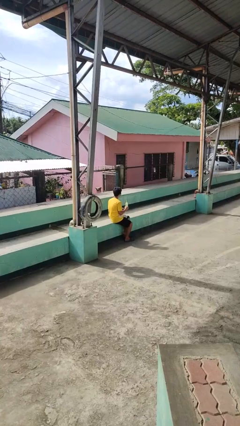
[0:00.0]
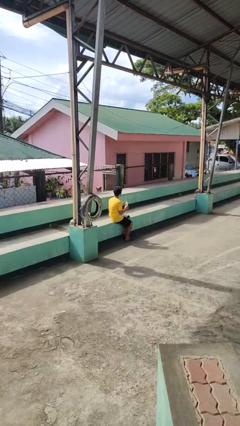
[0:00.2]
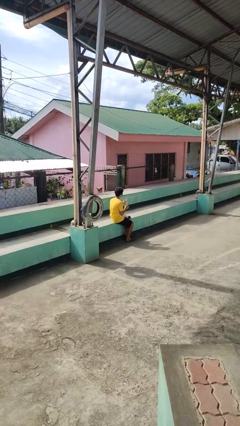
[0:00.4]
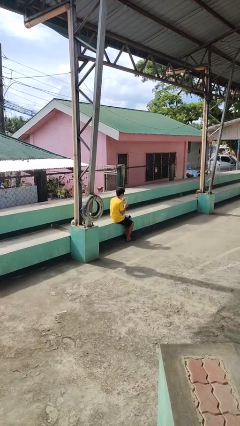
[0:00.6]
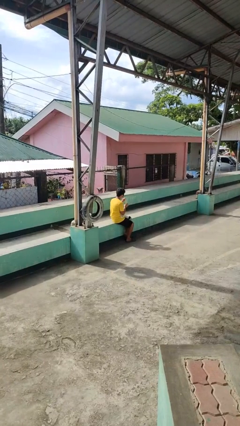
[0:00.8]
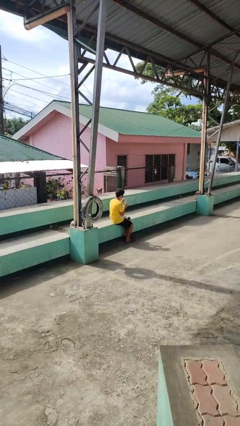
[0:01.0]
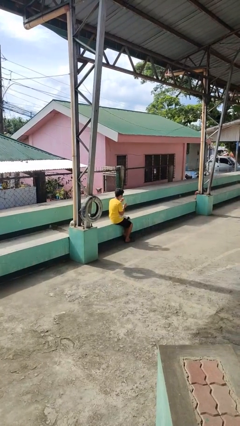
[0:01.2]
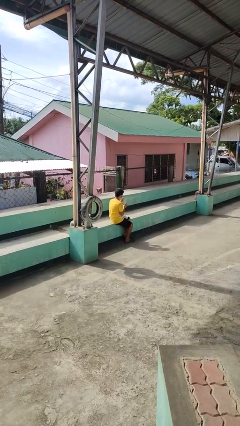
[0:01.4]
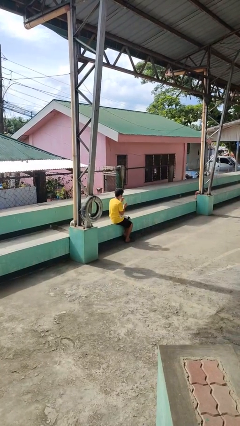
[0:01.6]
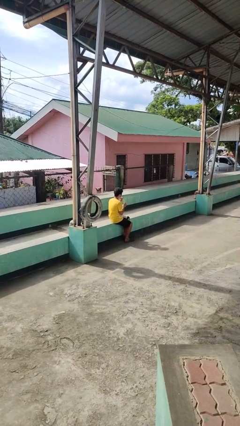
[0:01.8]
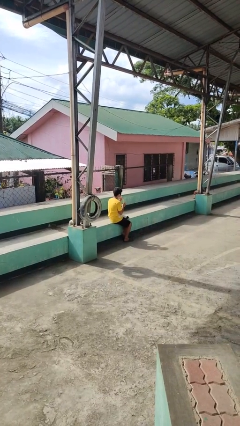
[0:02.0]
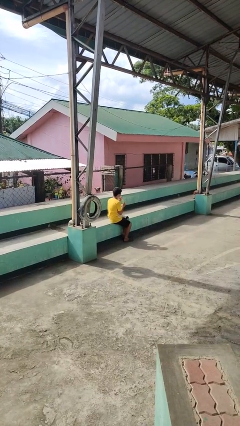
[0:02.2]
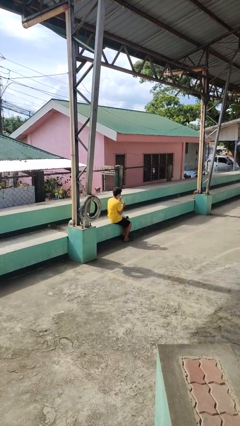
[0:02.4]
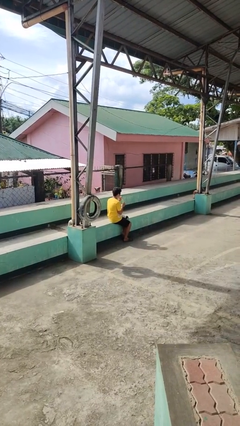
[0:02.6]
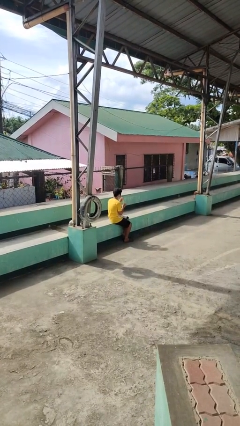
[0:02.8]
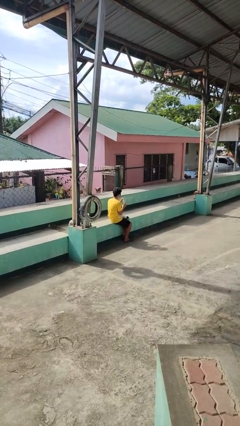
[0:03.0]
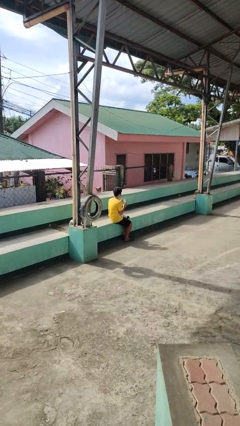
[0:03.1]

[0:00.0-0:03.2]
person drinks from straw

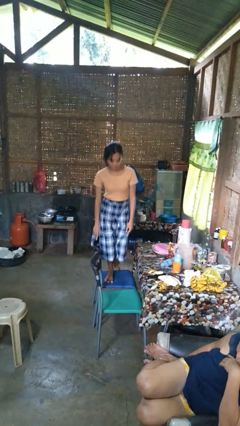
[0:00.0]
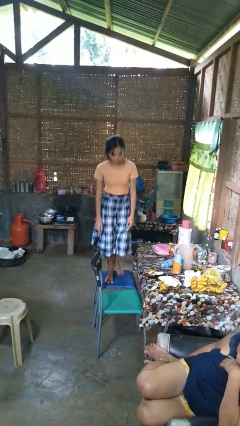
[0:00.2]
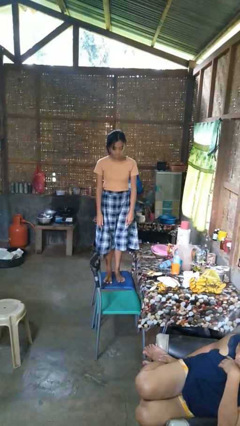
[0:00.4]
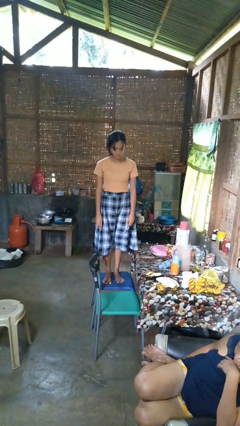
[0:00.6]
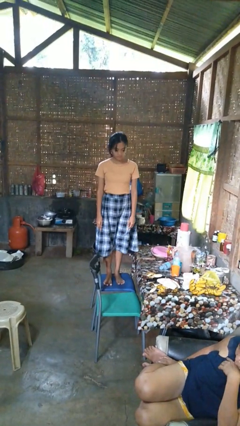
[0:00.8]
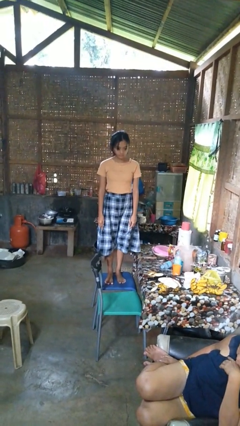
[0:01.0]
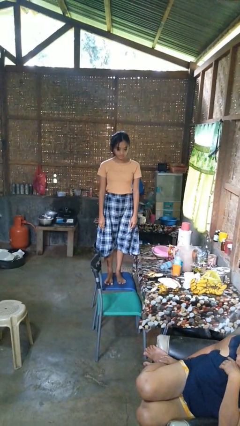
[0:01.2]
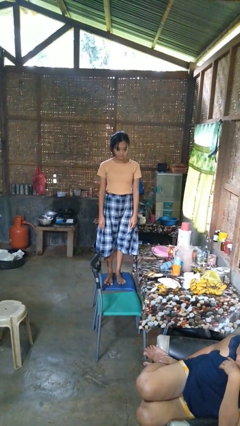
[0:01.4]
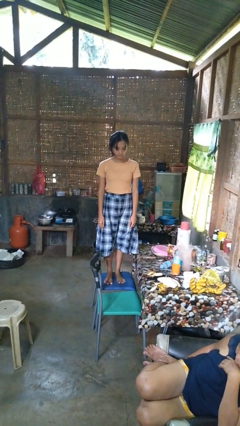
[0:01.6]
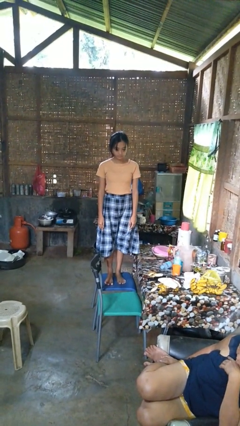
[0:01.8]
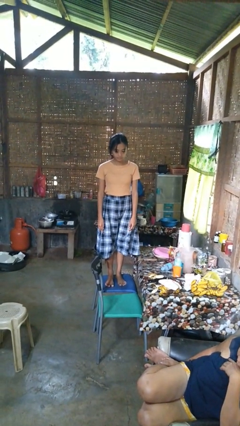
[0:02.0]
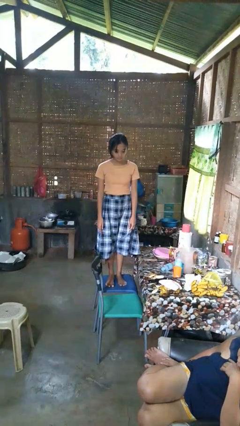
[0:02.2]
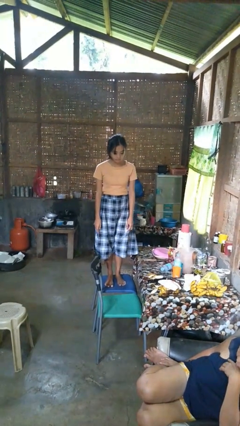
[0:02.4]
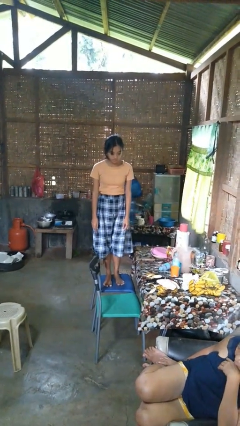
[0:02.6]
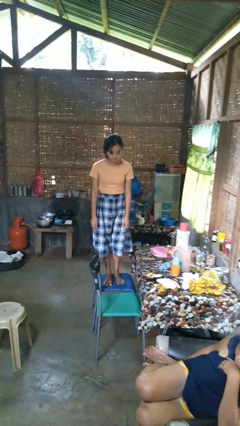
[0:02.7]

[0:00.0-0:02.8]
person climbs on couch

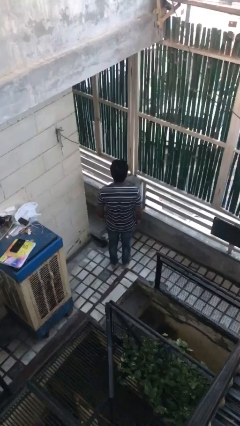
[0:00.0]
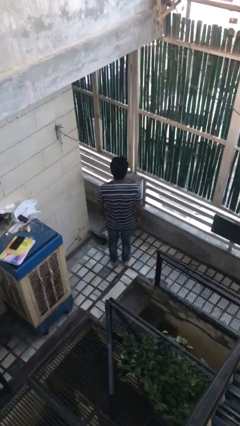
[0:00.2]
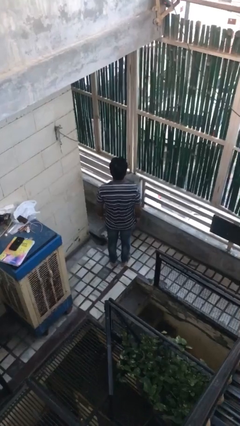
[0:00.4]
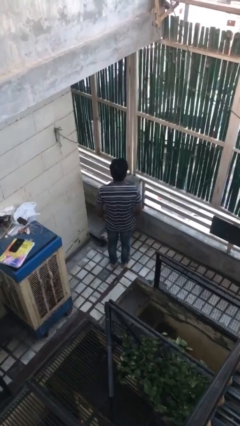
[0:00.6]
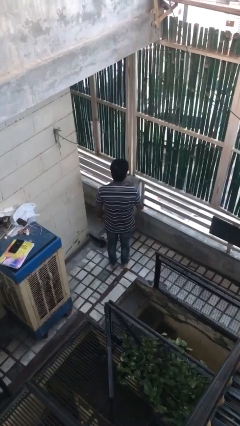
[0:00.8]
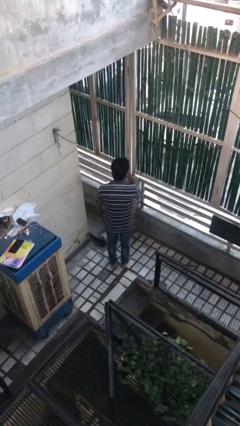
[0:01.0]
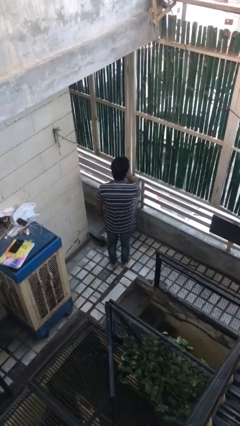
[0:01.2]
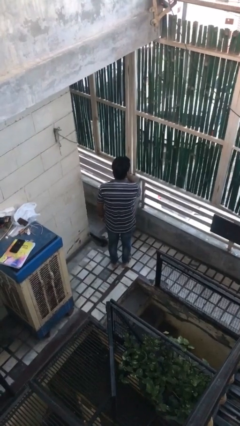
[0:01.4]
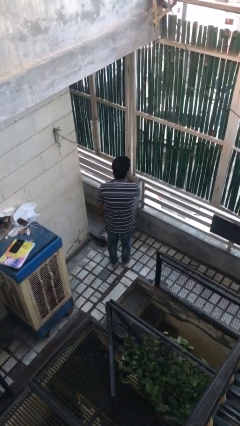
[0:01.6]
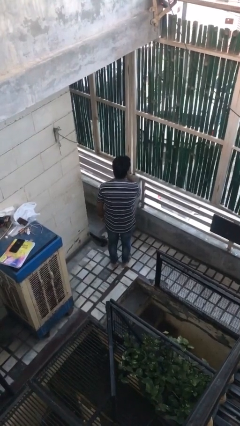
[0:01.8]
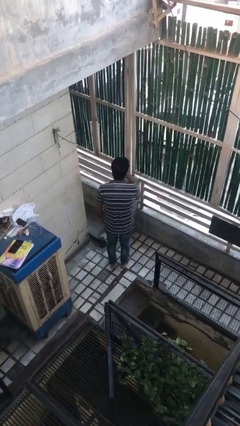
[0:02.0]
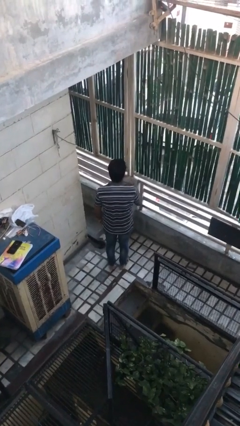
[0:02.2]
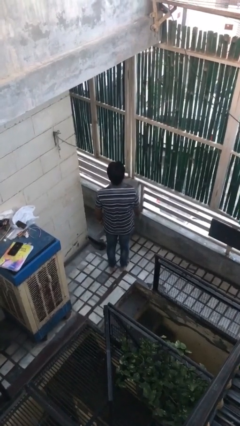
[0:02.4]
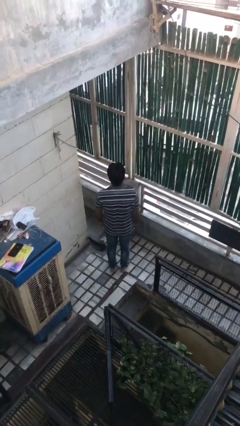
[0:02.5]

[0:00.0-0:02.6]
person gestures be quiet

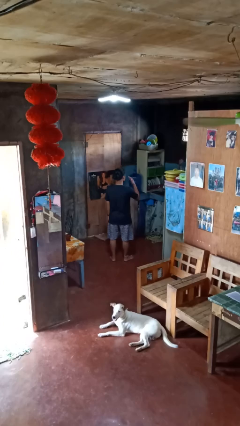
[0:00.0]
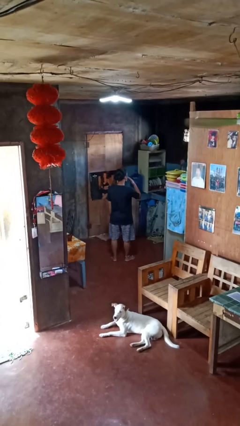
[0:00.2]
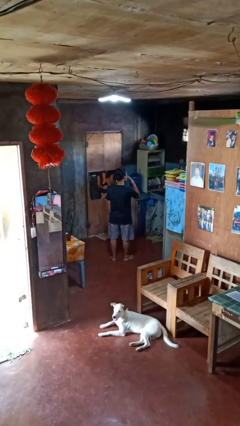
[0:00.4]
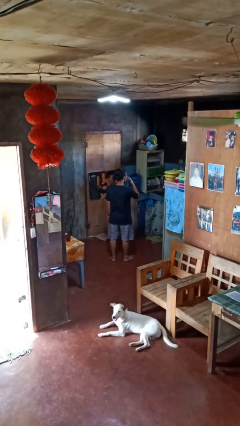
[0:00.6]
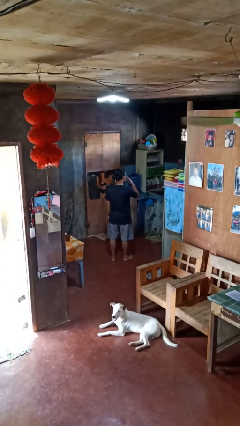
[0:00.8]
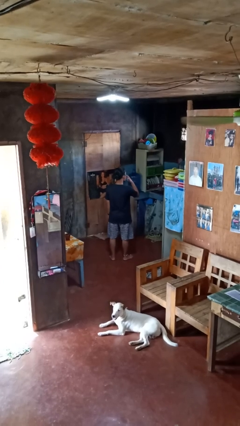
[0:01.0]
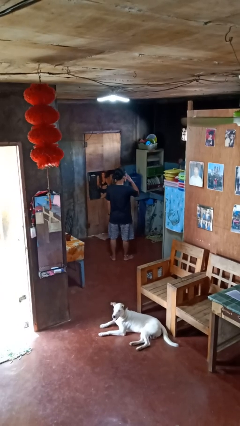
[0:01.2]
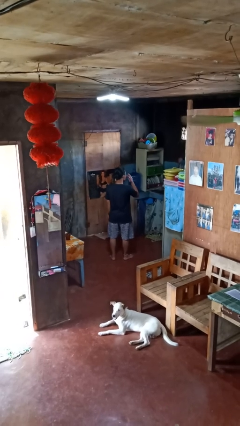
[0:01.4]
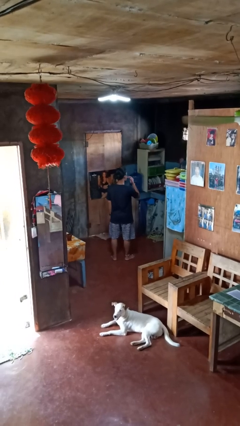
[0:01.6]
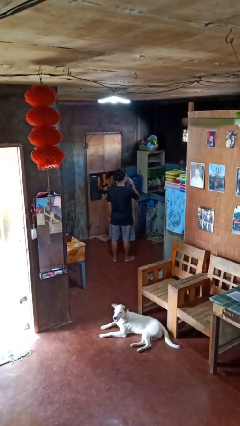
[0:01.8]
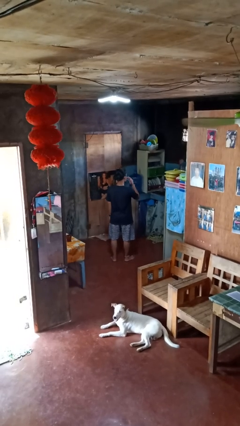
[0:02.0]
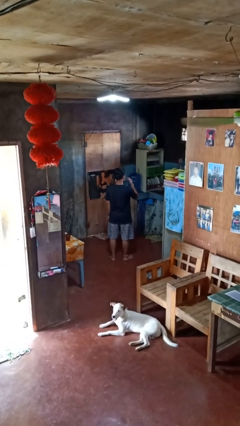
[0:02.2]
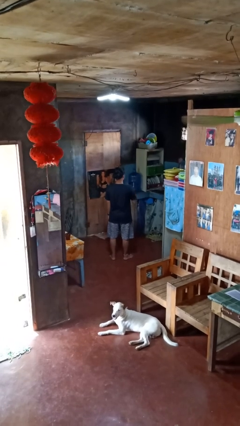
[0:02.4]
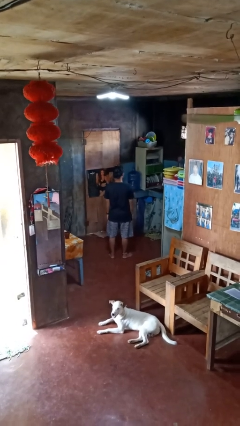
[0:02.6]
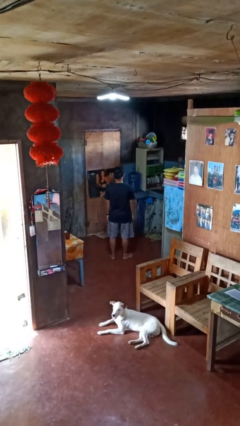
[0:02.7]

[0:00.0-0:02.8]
person licks fingers

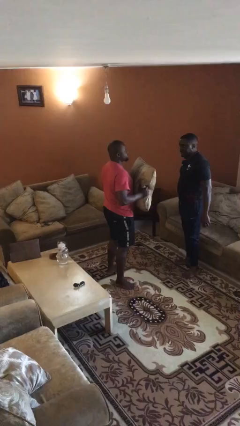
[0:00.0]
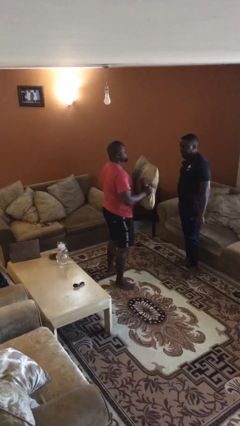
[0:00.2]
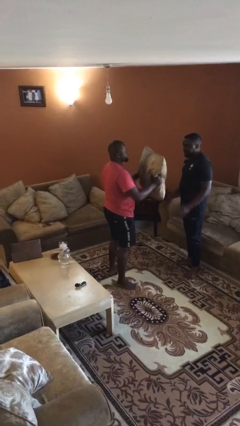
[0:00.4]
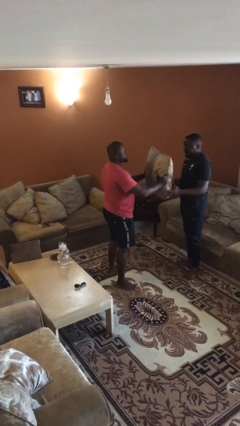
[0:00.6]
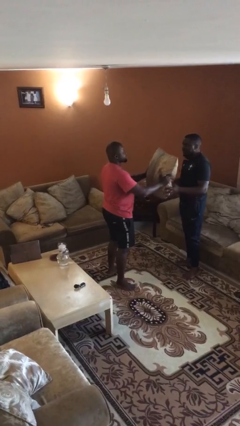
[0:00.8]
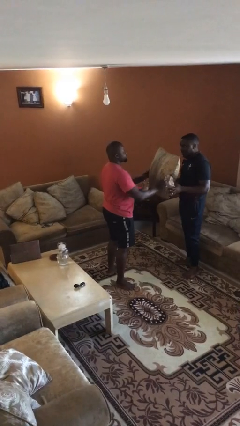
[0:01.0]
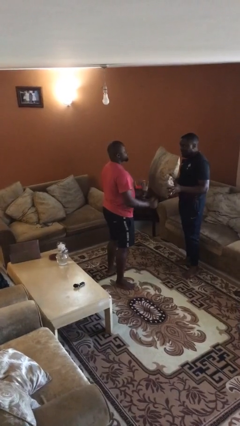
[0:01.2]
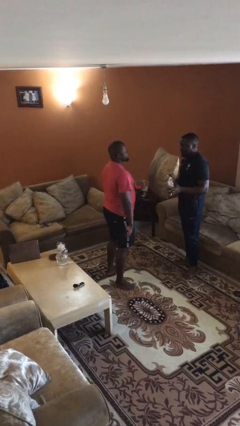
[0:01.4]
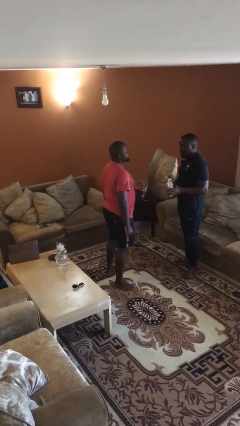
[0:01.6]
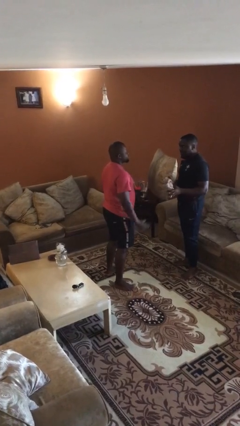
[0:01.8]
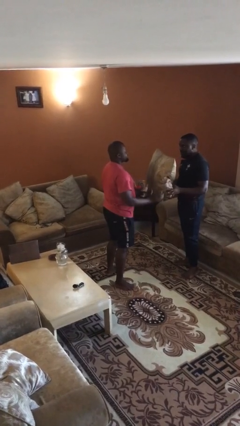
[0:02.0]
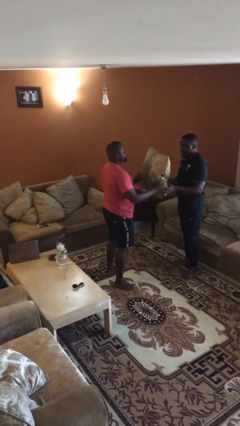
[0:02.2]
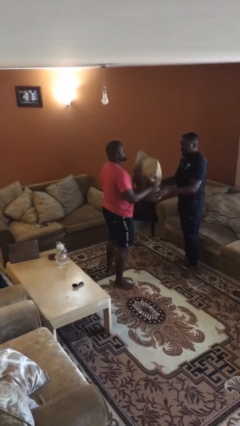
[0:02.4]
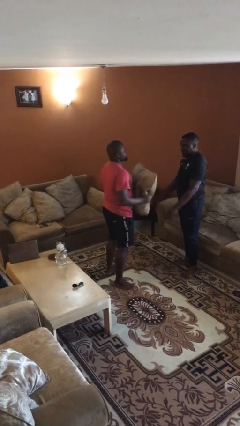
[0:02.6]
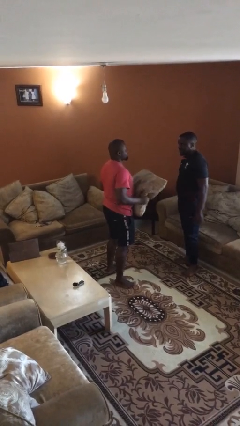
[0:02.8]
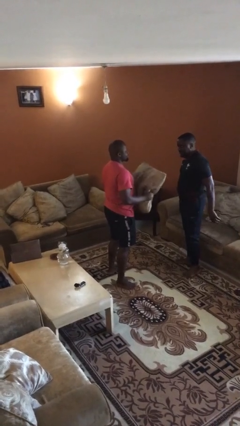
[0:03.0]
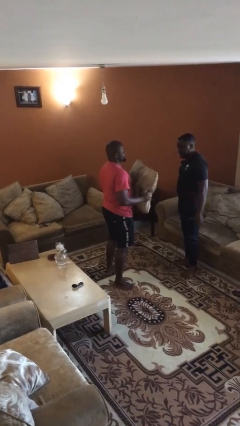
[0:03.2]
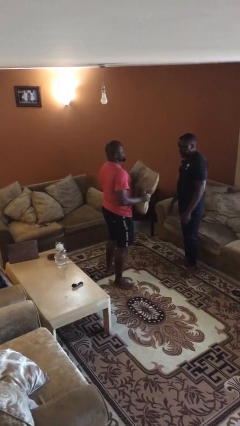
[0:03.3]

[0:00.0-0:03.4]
person transfers object to person

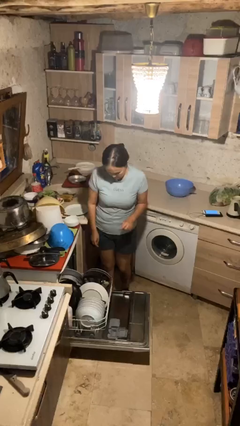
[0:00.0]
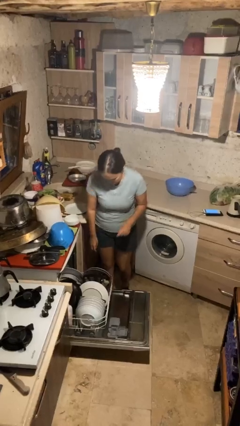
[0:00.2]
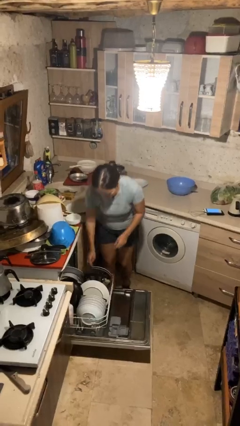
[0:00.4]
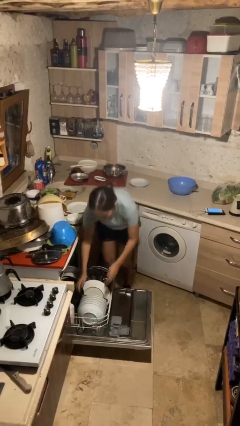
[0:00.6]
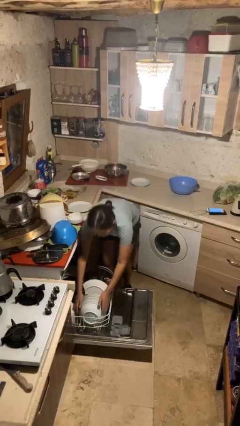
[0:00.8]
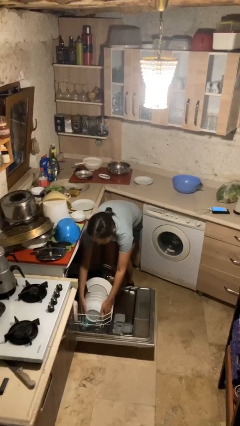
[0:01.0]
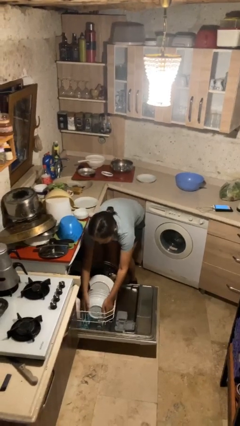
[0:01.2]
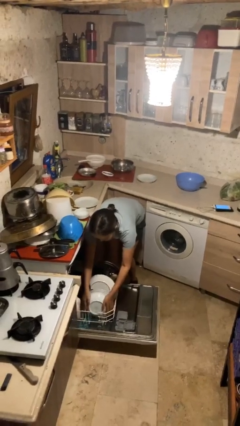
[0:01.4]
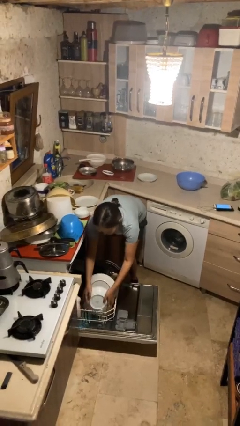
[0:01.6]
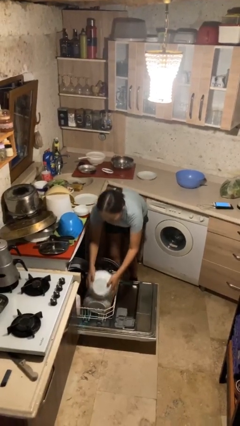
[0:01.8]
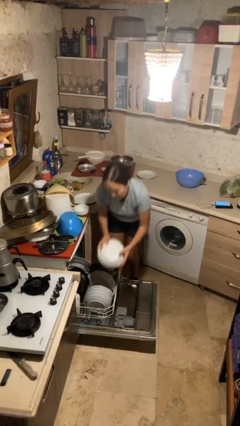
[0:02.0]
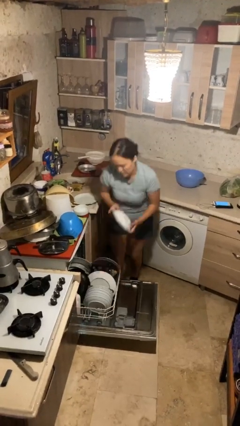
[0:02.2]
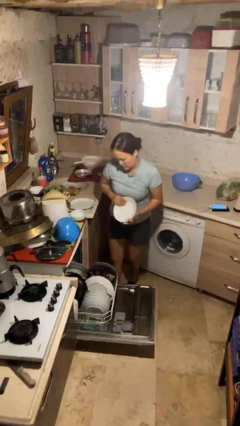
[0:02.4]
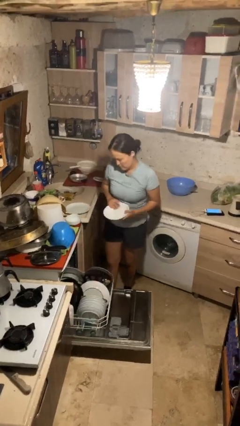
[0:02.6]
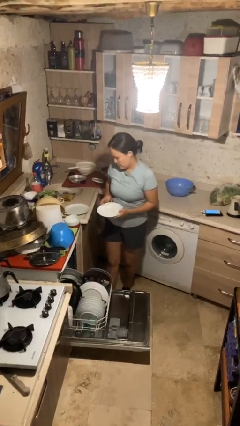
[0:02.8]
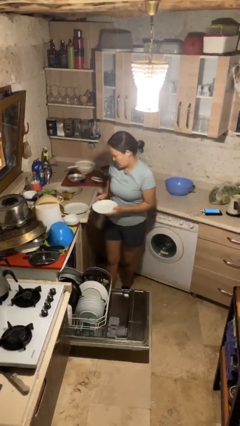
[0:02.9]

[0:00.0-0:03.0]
person unloads dishwasher
